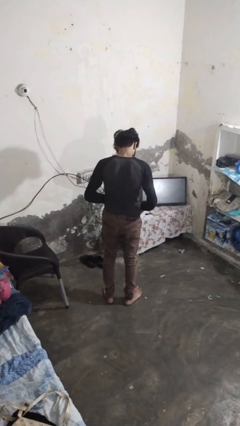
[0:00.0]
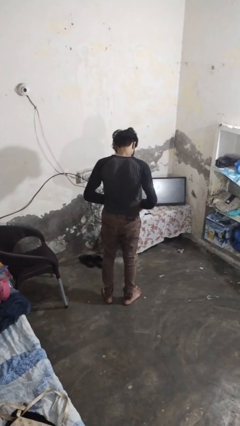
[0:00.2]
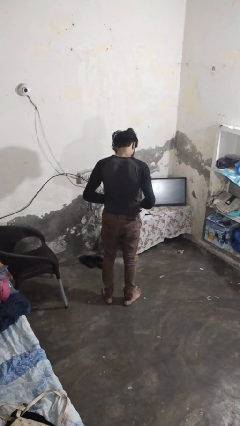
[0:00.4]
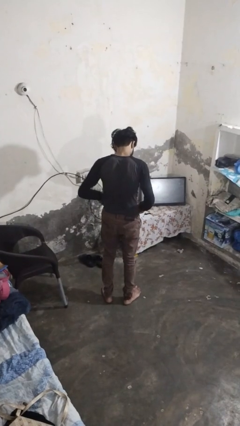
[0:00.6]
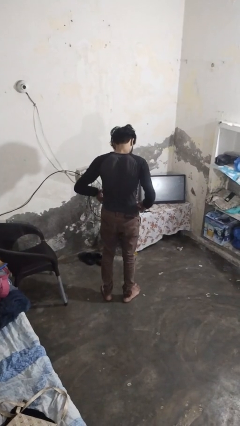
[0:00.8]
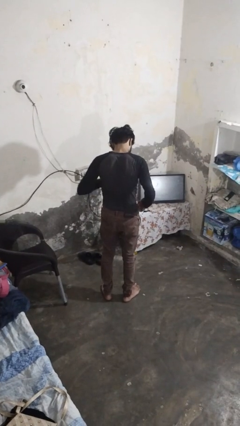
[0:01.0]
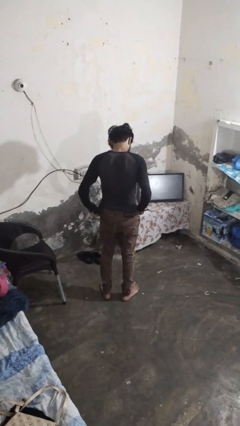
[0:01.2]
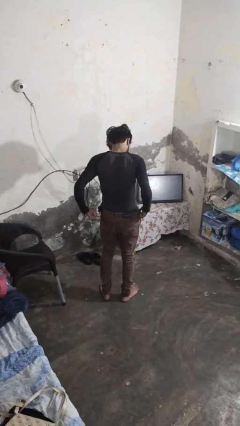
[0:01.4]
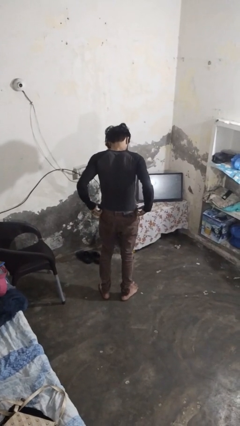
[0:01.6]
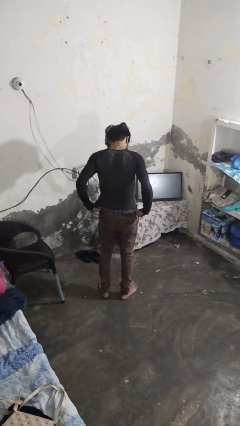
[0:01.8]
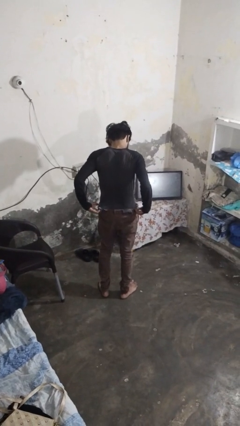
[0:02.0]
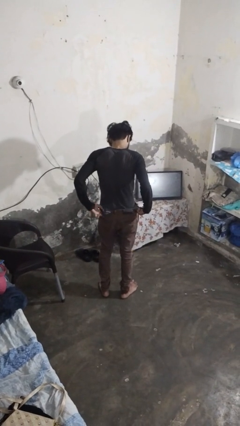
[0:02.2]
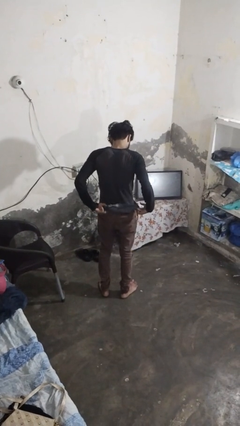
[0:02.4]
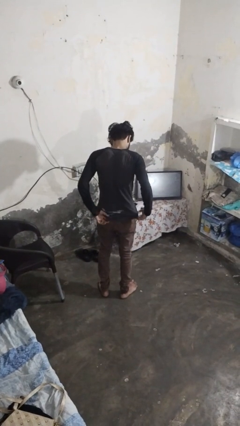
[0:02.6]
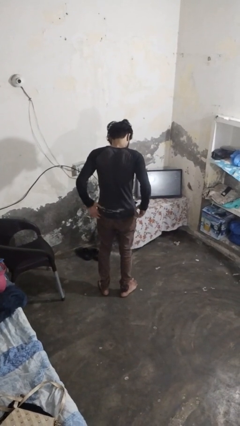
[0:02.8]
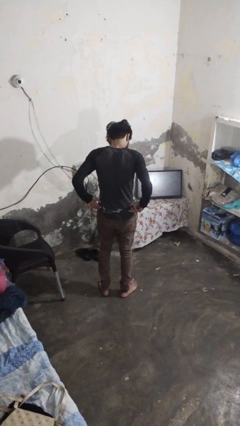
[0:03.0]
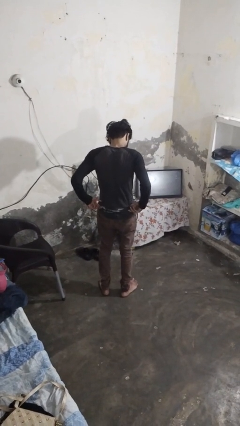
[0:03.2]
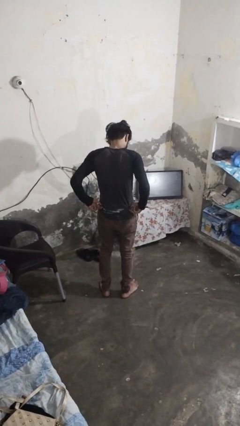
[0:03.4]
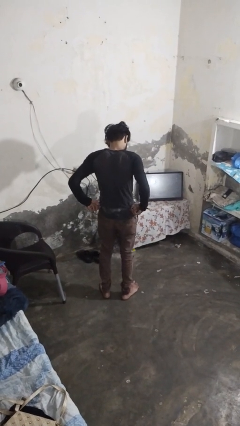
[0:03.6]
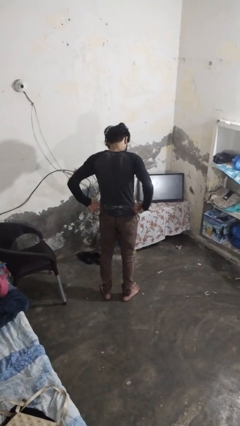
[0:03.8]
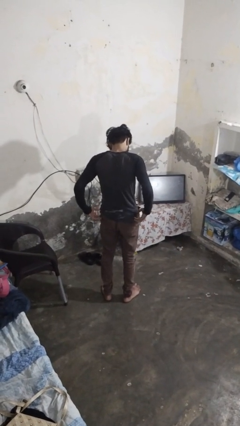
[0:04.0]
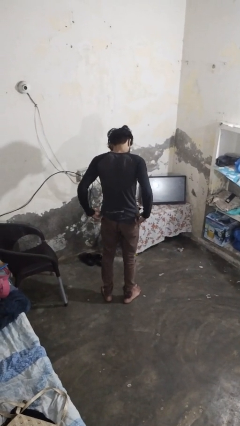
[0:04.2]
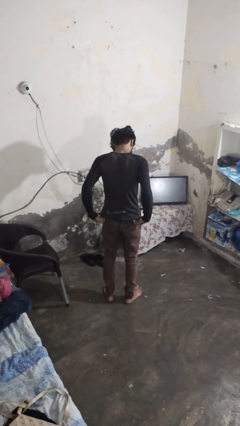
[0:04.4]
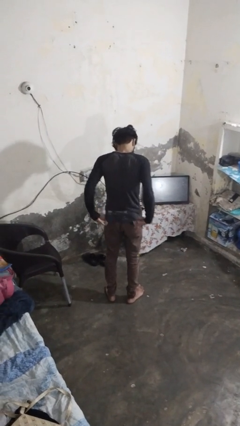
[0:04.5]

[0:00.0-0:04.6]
person untucks shirt

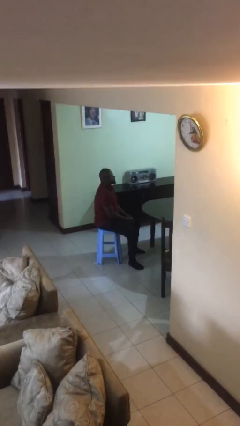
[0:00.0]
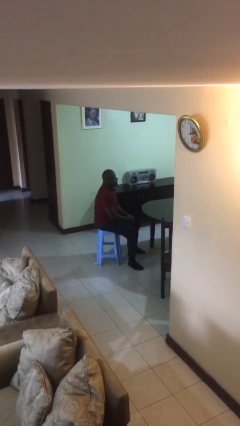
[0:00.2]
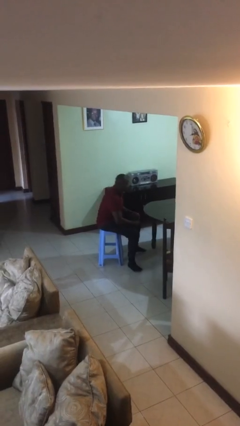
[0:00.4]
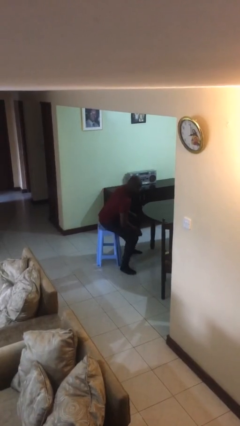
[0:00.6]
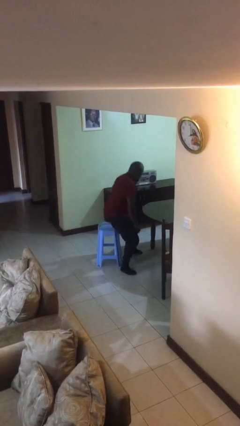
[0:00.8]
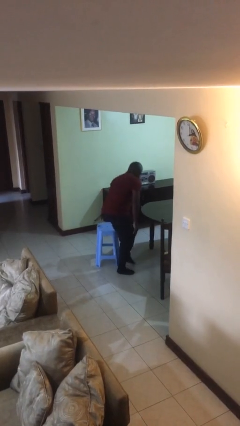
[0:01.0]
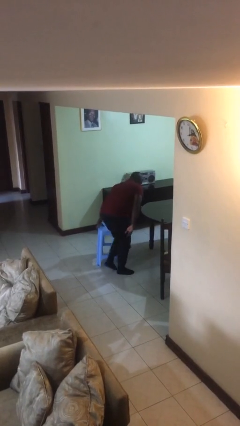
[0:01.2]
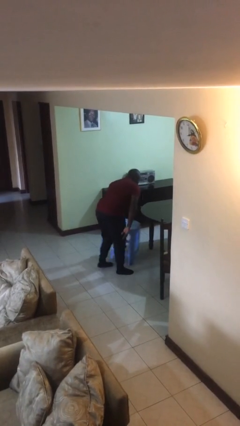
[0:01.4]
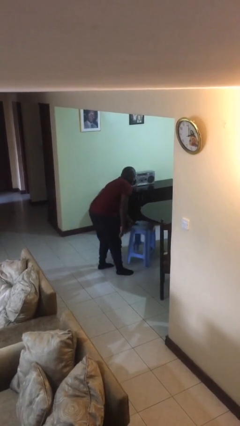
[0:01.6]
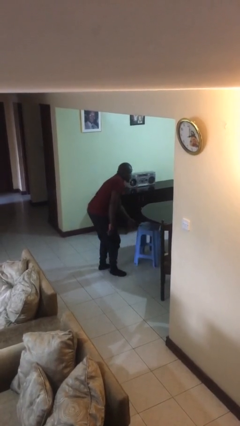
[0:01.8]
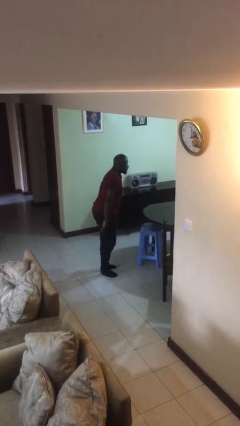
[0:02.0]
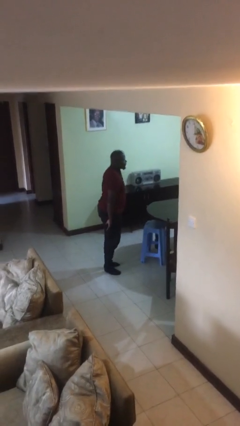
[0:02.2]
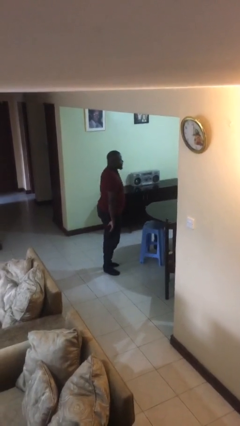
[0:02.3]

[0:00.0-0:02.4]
person stands up

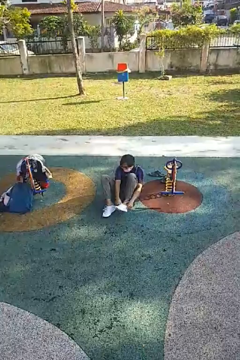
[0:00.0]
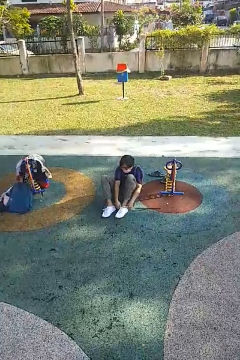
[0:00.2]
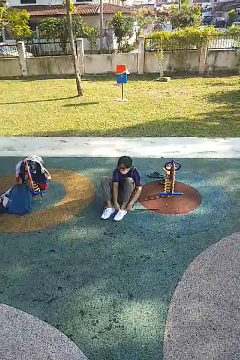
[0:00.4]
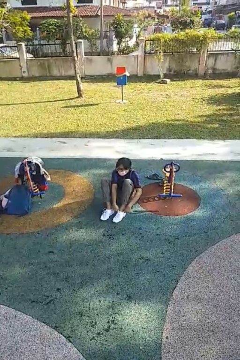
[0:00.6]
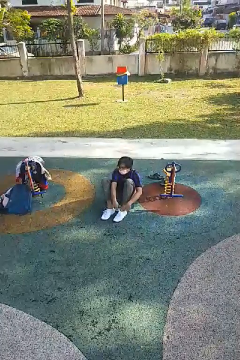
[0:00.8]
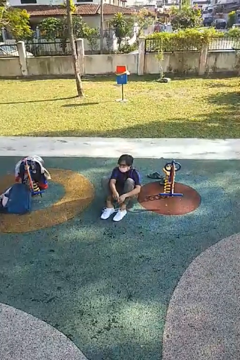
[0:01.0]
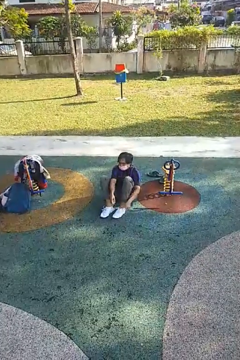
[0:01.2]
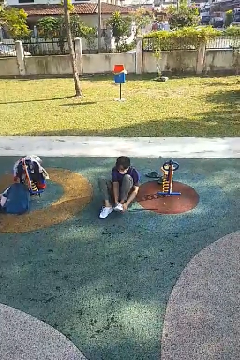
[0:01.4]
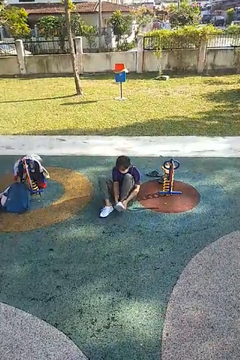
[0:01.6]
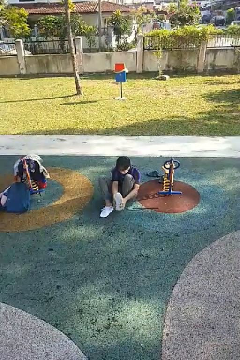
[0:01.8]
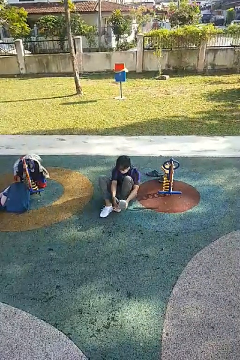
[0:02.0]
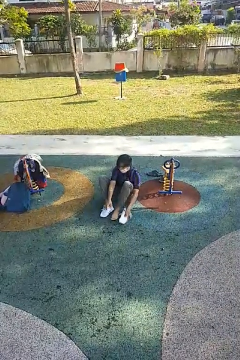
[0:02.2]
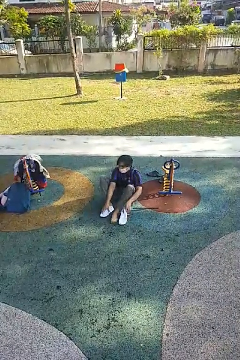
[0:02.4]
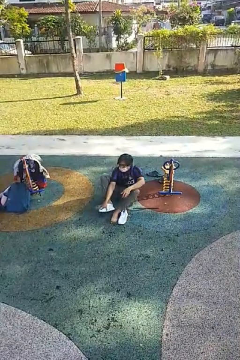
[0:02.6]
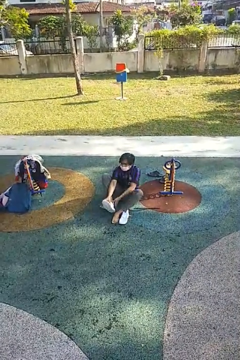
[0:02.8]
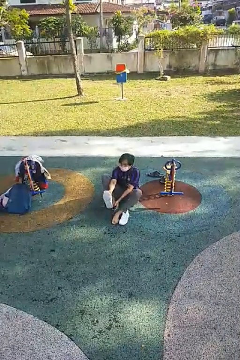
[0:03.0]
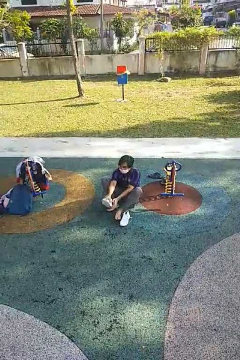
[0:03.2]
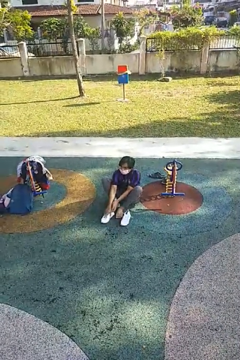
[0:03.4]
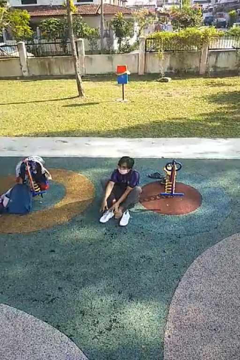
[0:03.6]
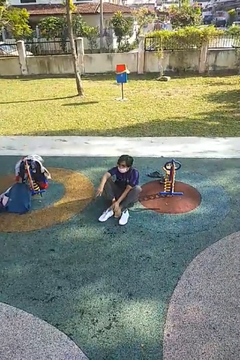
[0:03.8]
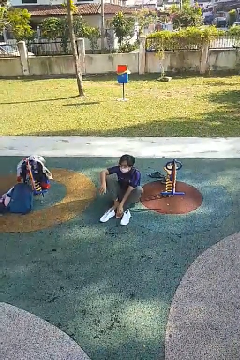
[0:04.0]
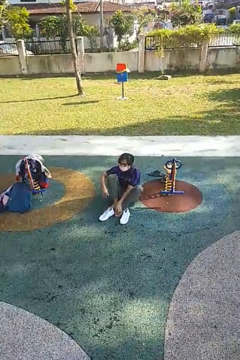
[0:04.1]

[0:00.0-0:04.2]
person takes off shoes

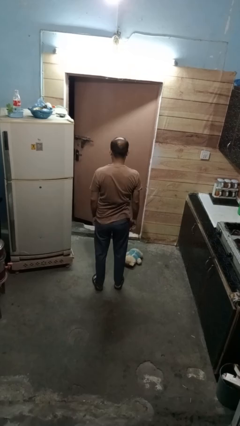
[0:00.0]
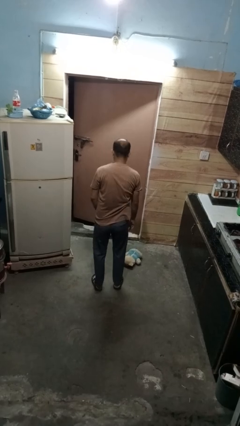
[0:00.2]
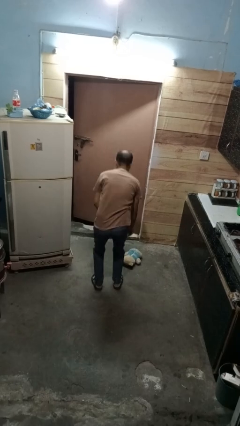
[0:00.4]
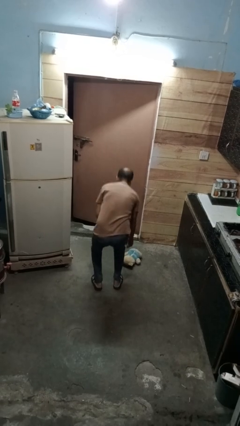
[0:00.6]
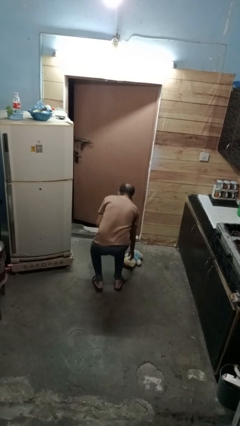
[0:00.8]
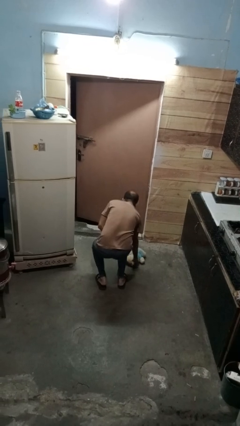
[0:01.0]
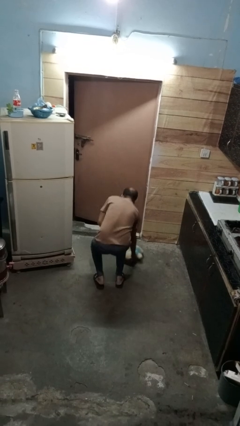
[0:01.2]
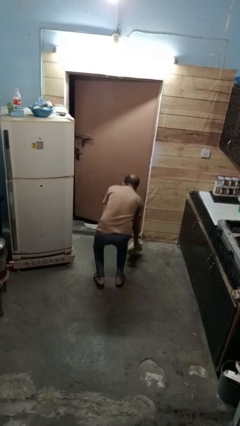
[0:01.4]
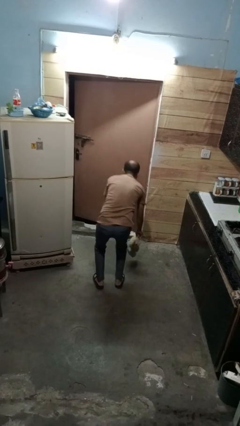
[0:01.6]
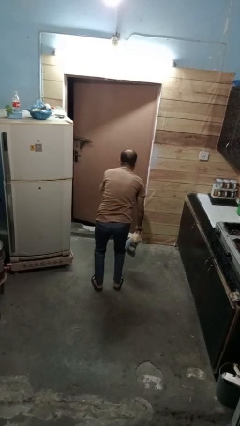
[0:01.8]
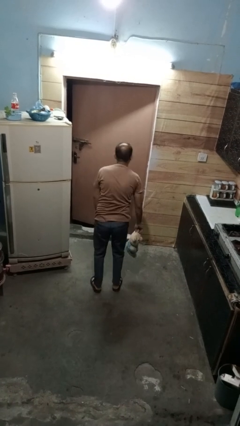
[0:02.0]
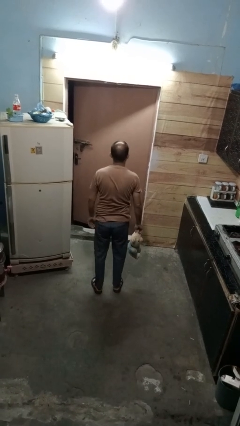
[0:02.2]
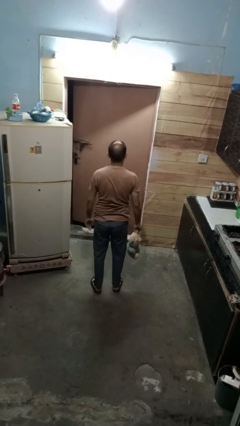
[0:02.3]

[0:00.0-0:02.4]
person picks up object from floor

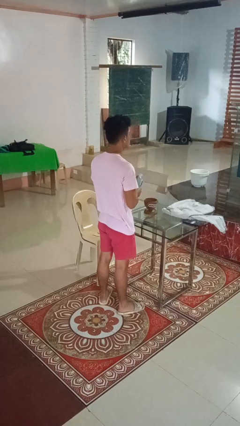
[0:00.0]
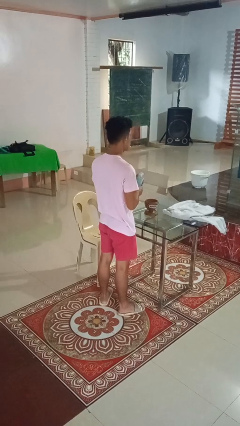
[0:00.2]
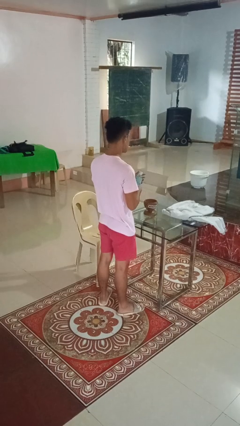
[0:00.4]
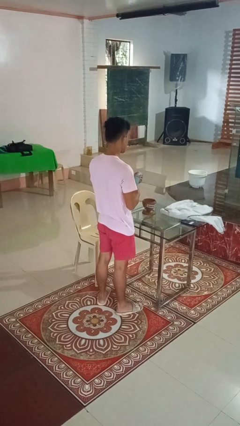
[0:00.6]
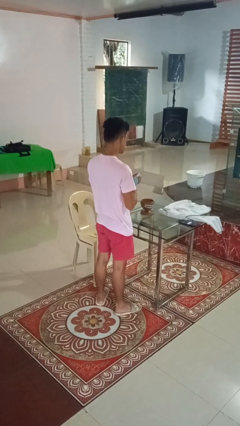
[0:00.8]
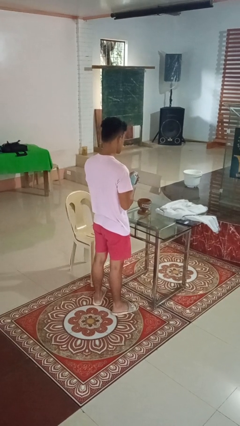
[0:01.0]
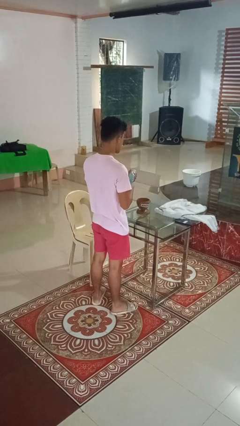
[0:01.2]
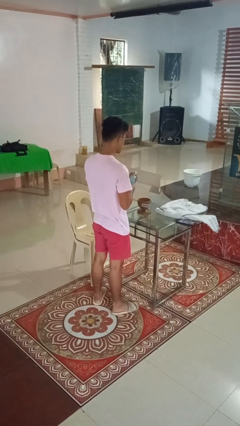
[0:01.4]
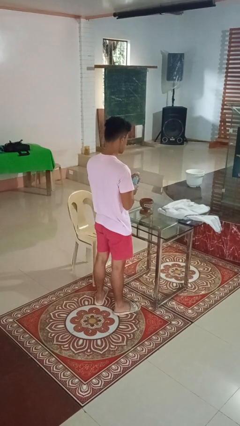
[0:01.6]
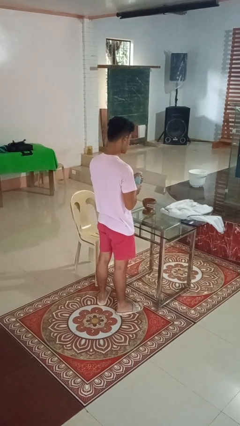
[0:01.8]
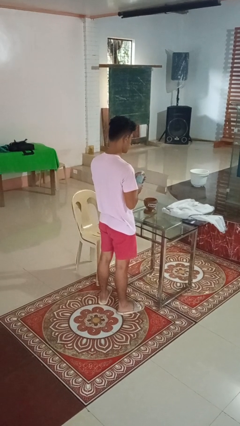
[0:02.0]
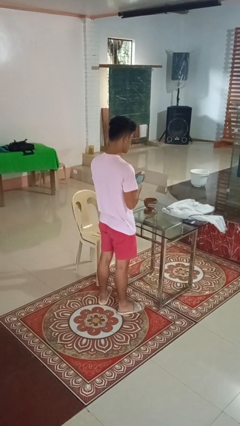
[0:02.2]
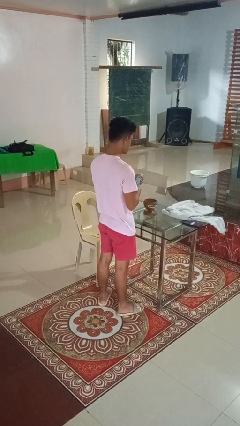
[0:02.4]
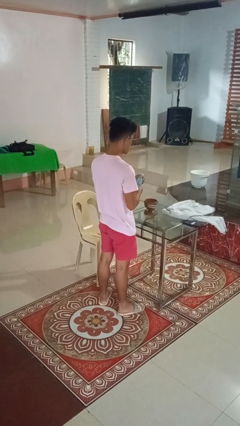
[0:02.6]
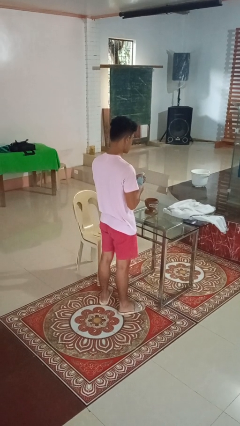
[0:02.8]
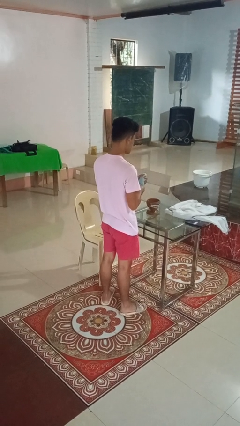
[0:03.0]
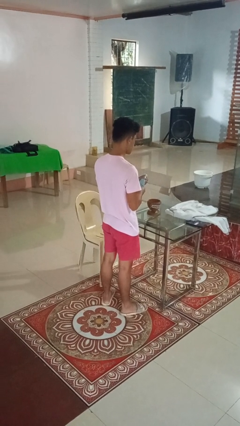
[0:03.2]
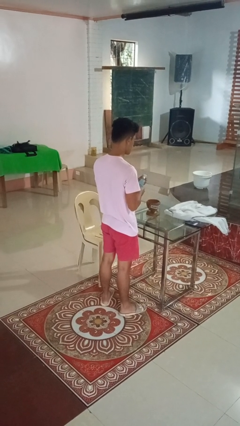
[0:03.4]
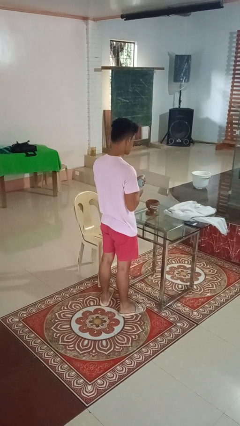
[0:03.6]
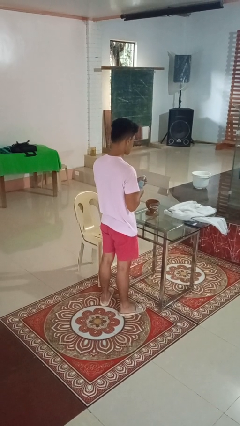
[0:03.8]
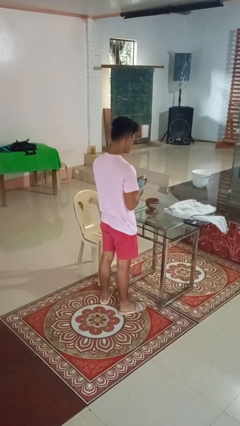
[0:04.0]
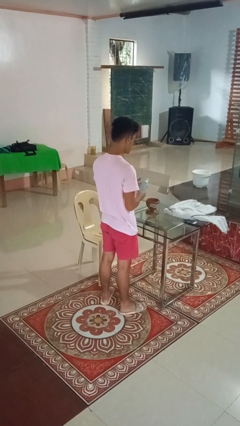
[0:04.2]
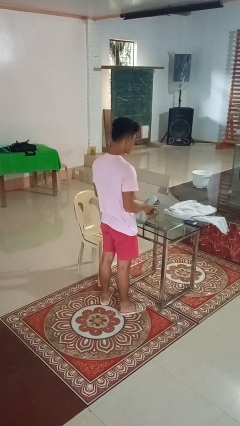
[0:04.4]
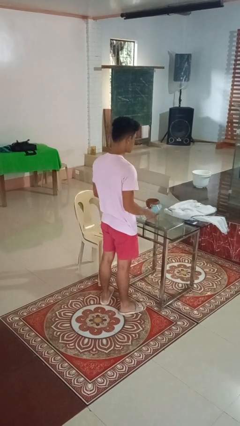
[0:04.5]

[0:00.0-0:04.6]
person squeezes object
